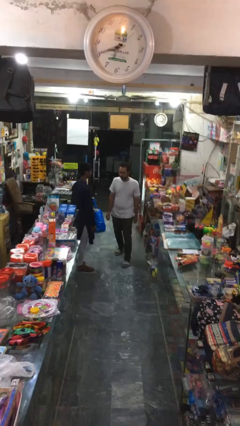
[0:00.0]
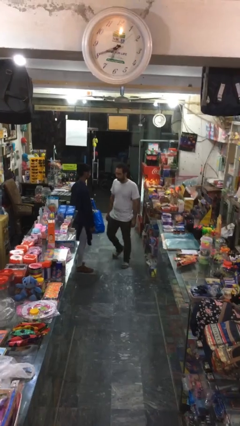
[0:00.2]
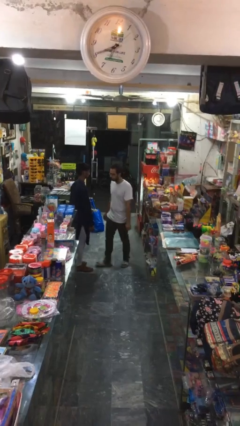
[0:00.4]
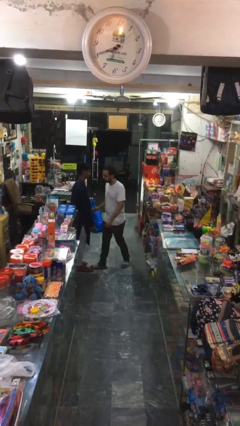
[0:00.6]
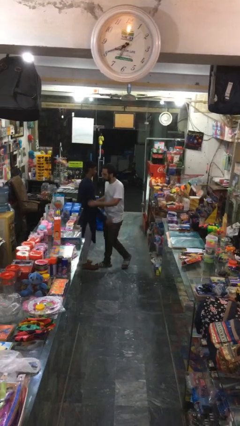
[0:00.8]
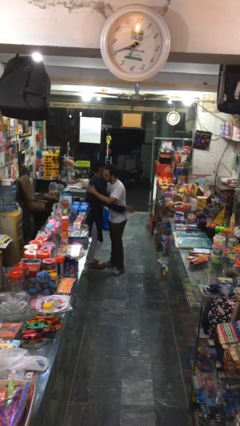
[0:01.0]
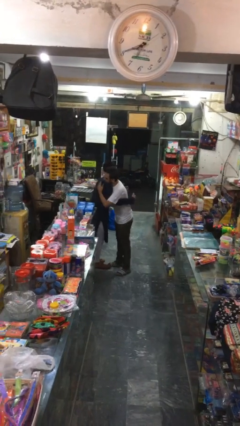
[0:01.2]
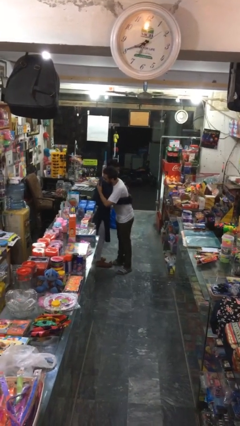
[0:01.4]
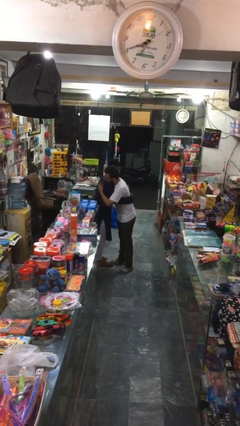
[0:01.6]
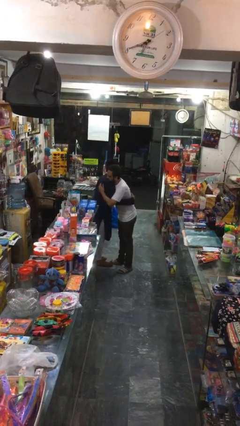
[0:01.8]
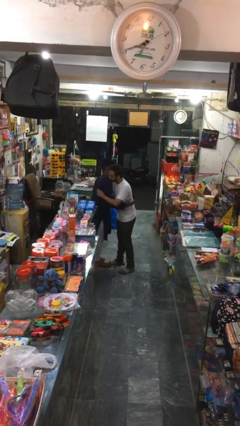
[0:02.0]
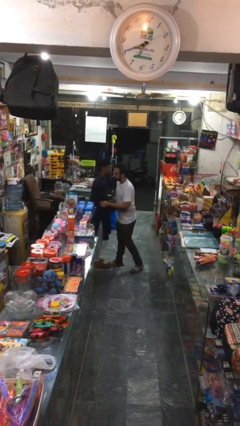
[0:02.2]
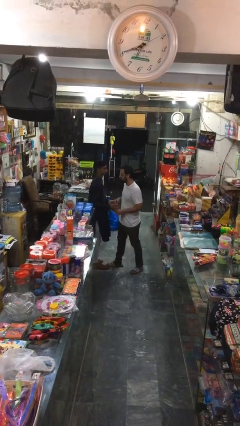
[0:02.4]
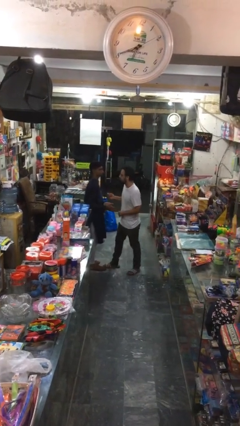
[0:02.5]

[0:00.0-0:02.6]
person embraces person

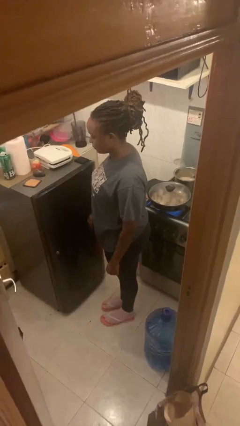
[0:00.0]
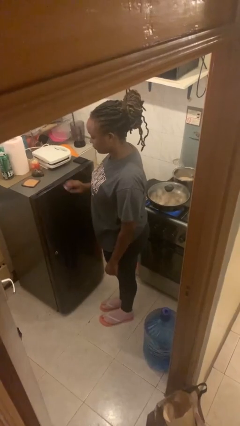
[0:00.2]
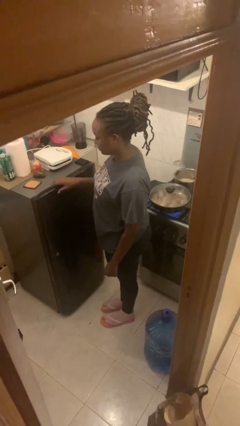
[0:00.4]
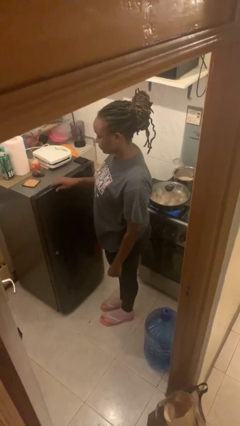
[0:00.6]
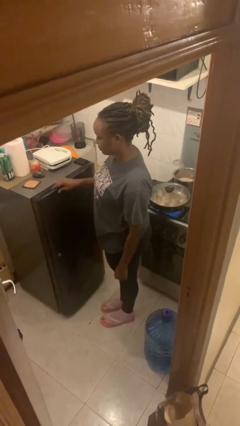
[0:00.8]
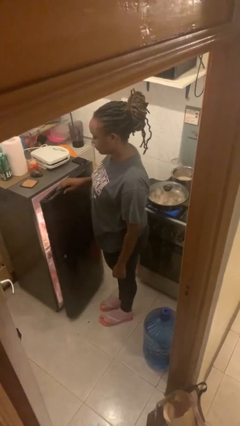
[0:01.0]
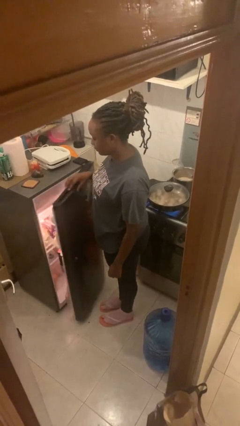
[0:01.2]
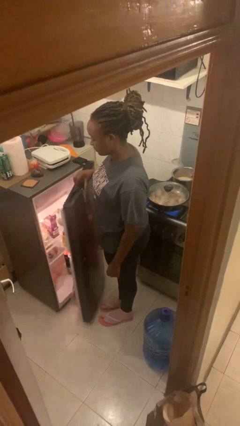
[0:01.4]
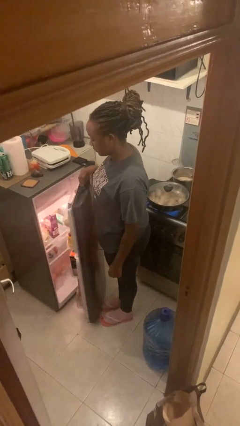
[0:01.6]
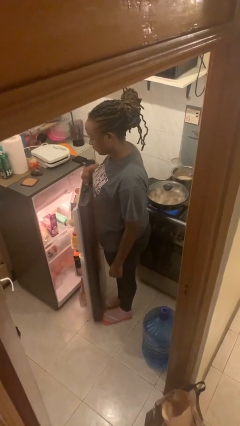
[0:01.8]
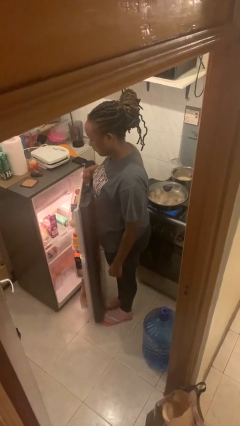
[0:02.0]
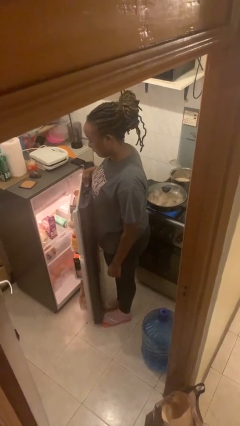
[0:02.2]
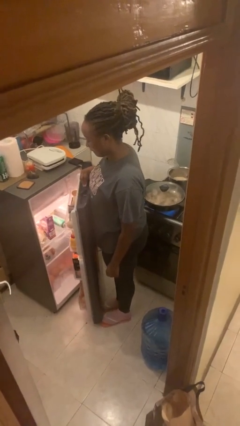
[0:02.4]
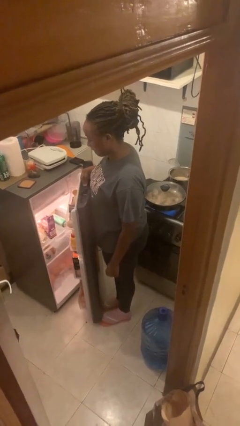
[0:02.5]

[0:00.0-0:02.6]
person opens refrigerator

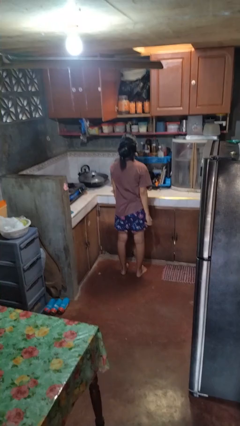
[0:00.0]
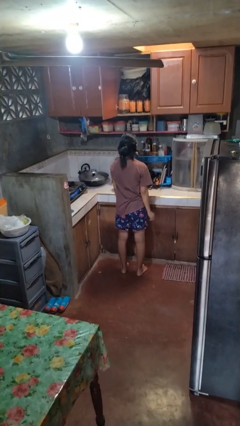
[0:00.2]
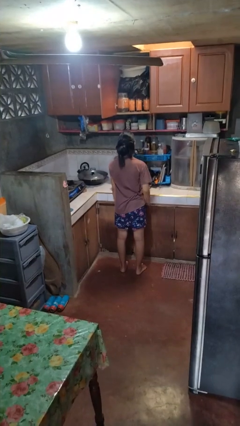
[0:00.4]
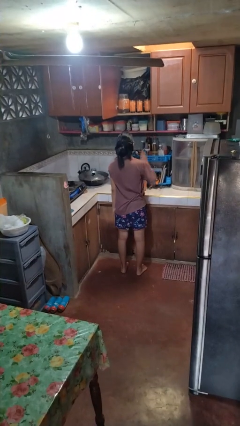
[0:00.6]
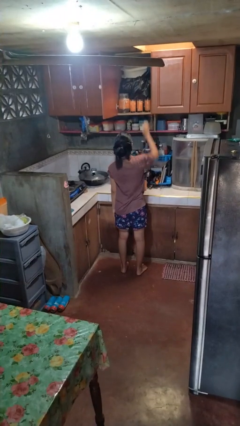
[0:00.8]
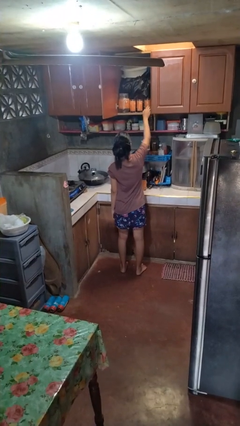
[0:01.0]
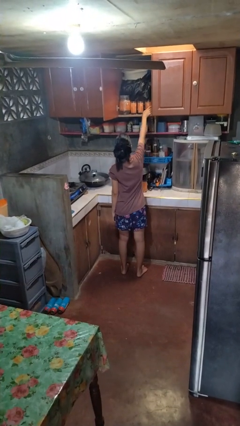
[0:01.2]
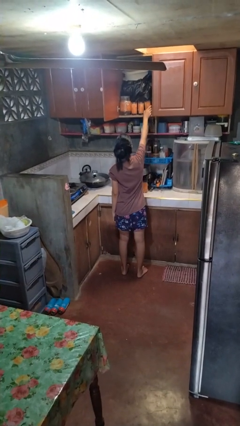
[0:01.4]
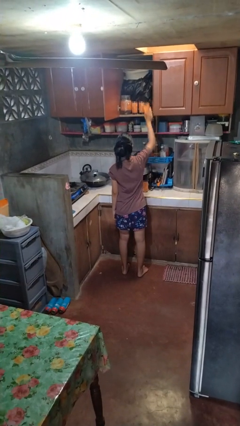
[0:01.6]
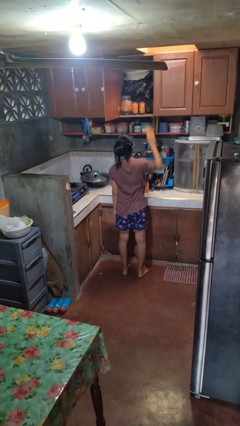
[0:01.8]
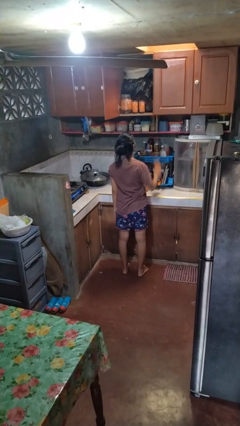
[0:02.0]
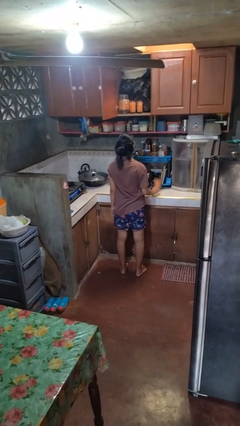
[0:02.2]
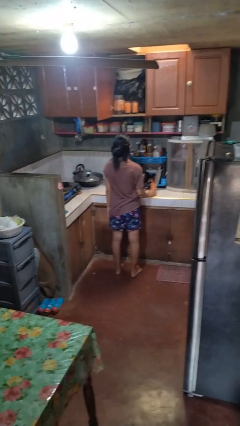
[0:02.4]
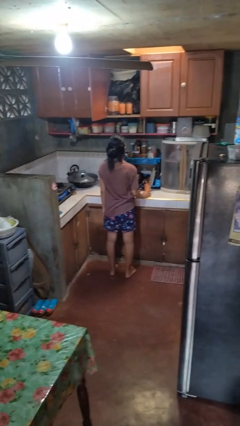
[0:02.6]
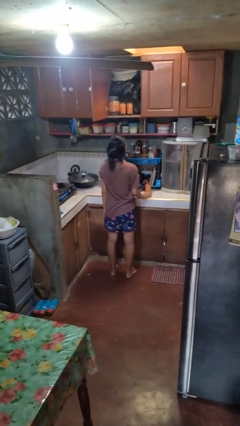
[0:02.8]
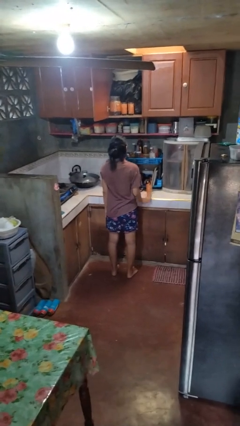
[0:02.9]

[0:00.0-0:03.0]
person takes object from cabinet

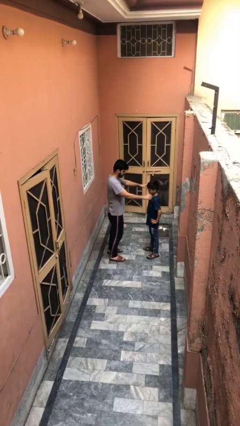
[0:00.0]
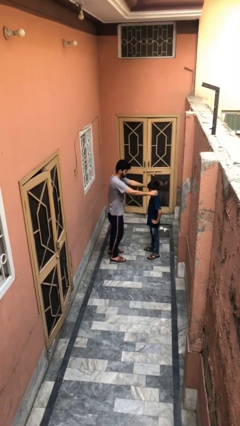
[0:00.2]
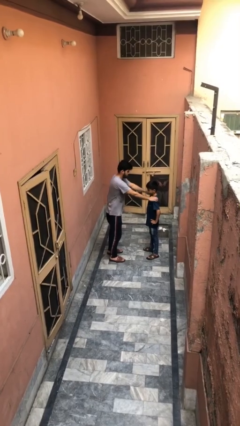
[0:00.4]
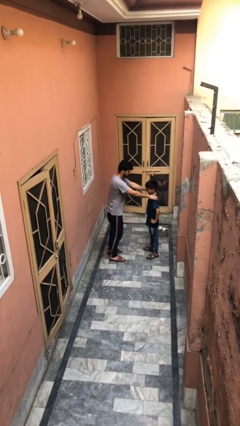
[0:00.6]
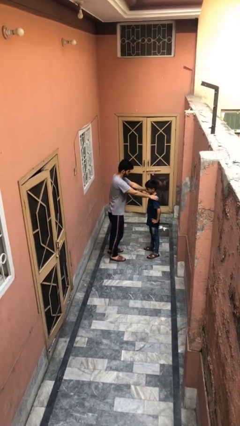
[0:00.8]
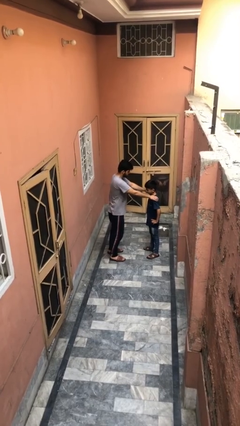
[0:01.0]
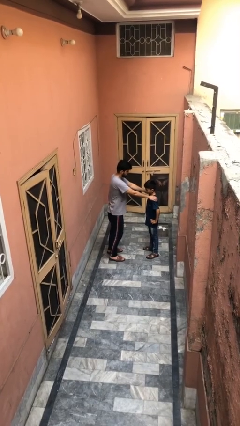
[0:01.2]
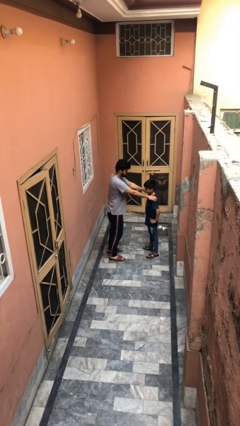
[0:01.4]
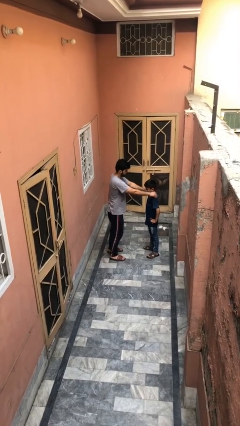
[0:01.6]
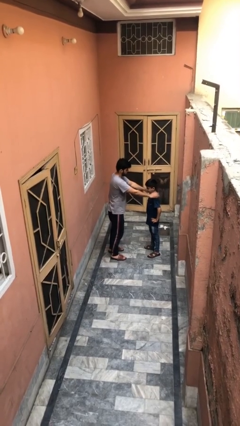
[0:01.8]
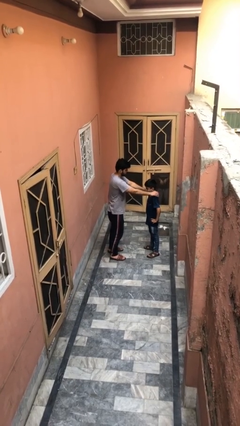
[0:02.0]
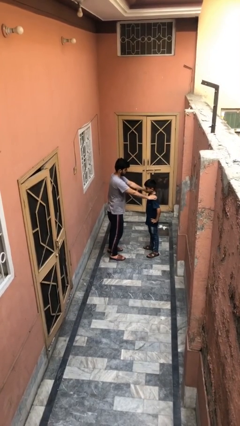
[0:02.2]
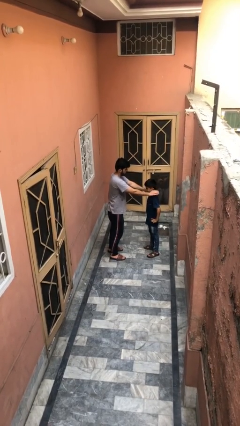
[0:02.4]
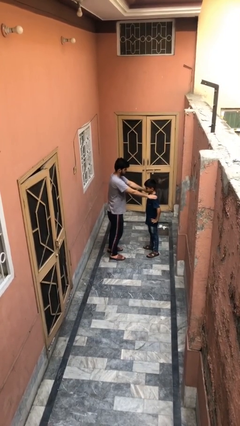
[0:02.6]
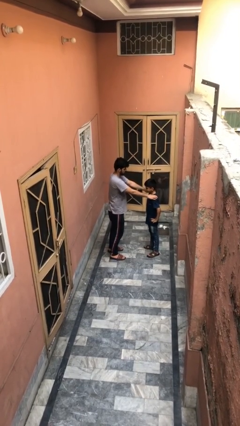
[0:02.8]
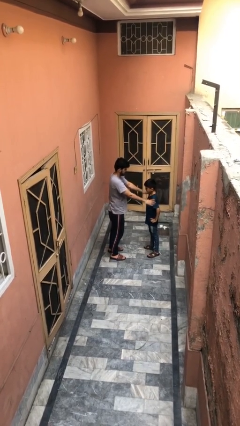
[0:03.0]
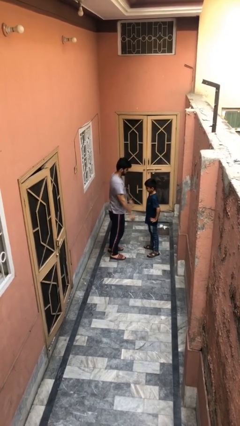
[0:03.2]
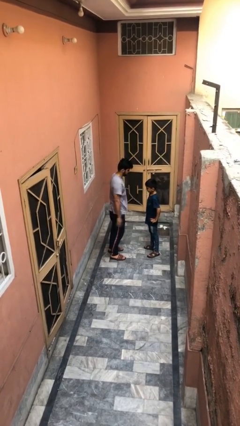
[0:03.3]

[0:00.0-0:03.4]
person pounds shoulders of person

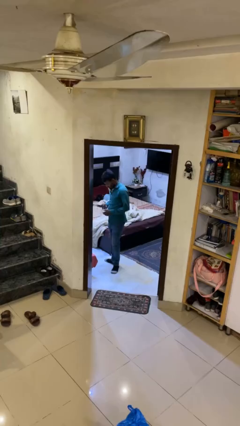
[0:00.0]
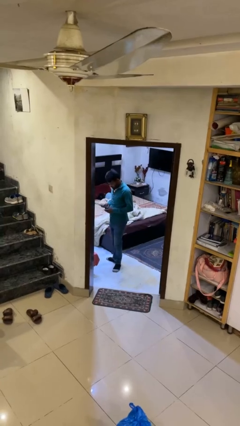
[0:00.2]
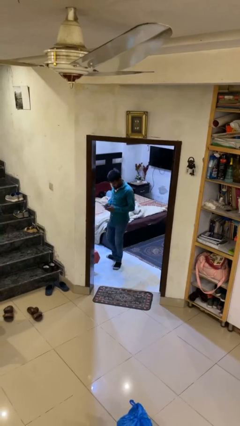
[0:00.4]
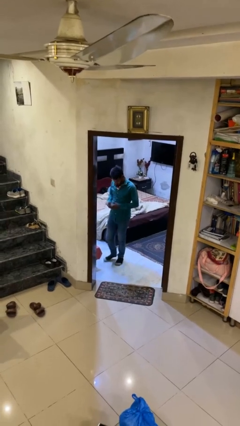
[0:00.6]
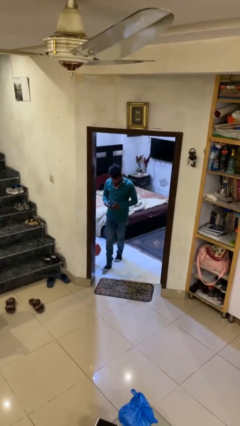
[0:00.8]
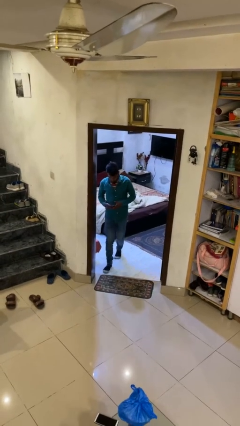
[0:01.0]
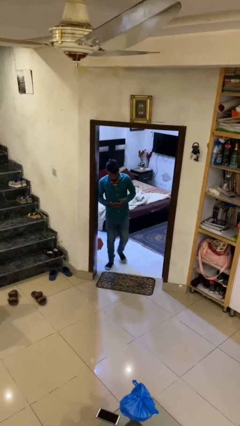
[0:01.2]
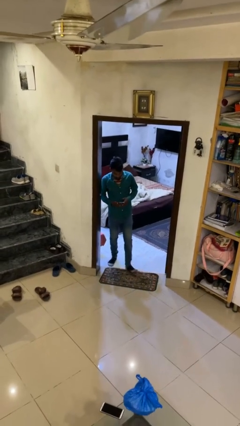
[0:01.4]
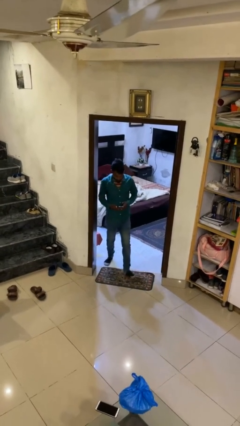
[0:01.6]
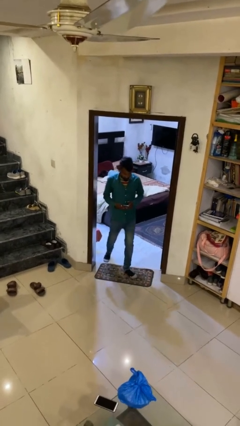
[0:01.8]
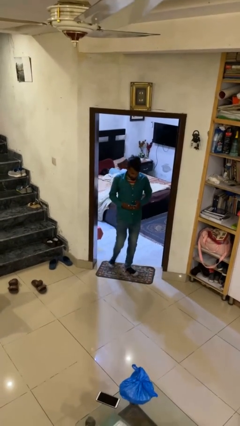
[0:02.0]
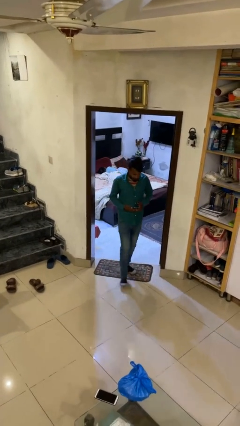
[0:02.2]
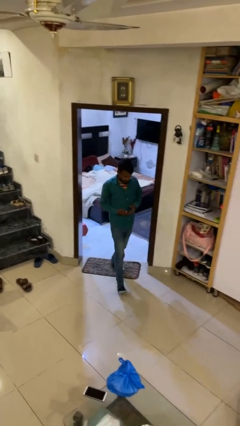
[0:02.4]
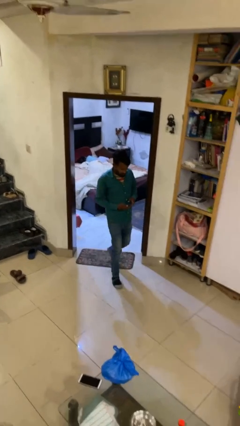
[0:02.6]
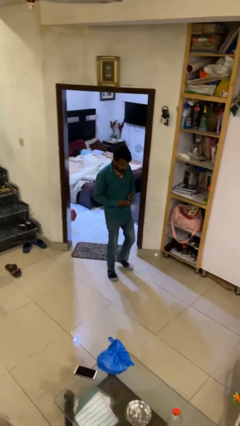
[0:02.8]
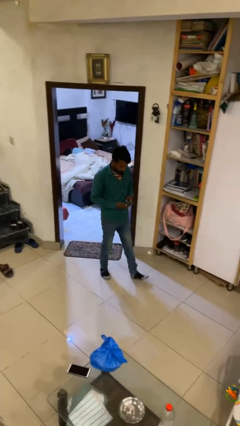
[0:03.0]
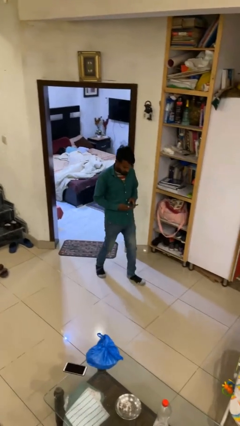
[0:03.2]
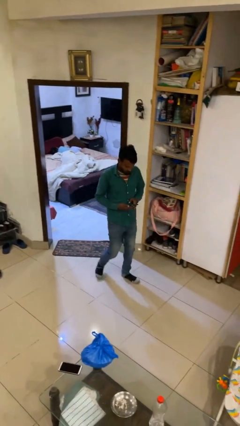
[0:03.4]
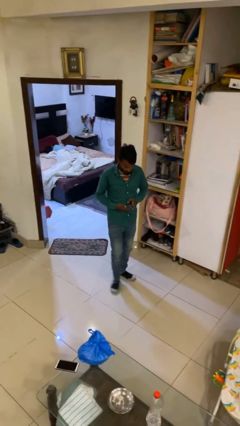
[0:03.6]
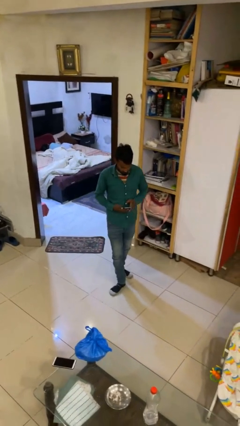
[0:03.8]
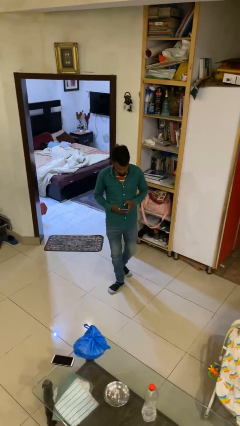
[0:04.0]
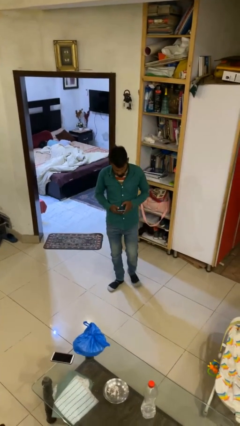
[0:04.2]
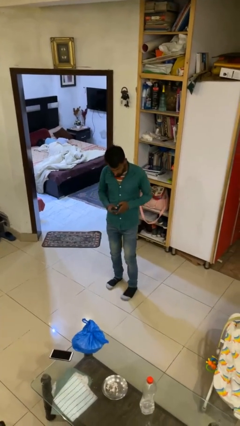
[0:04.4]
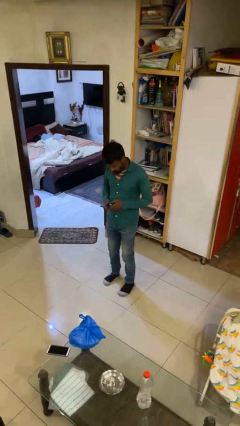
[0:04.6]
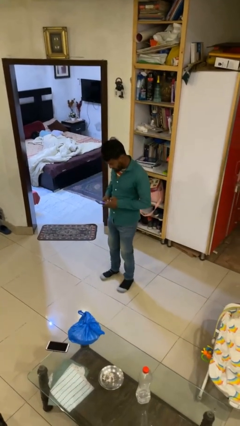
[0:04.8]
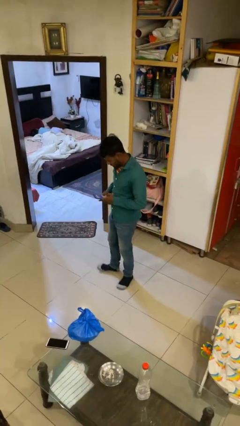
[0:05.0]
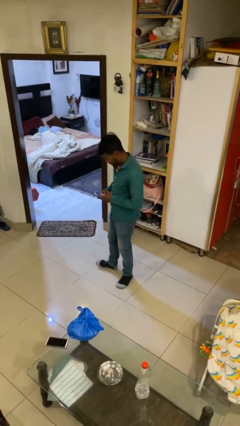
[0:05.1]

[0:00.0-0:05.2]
person enters scene through structure

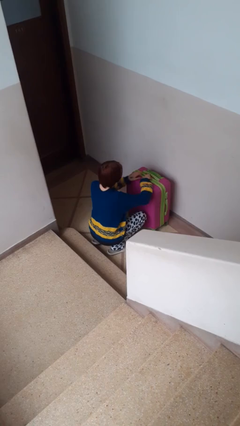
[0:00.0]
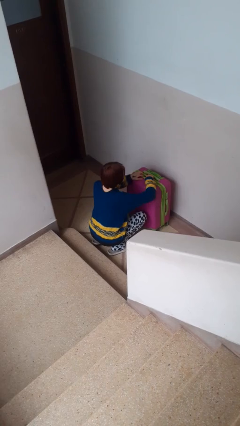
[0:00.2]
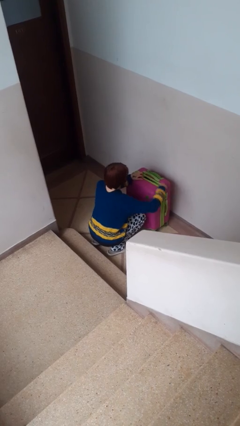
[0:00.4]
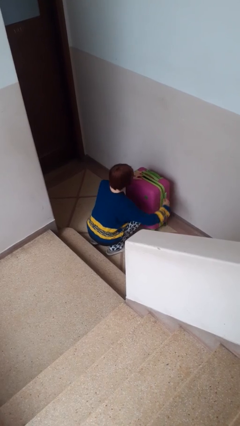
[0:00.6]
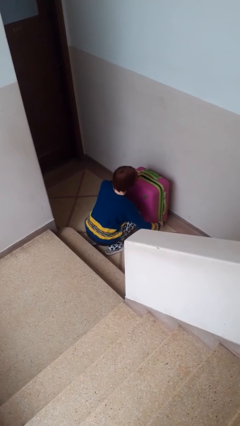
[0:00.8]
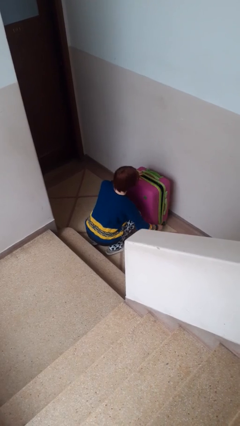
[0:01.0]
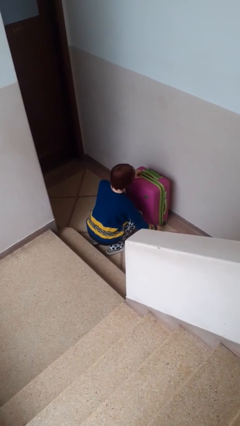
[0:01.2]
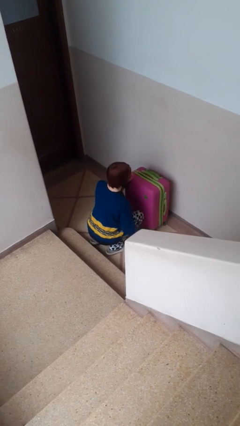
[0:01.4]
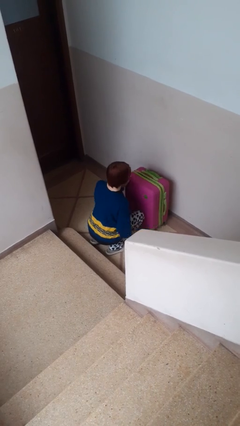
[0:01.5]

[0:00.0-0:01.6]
person opens suitcase
